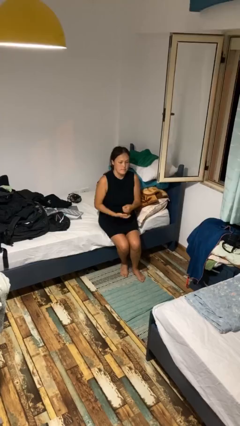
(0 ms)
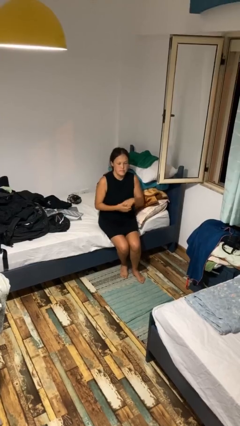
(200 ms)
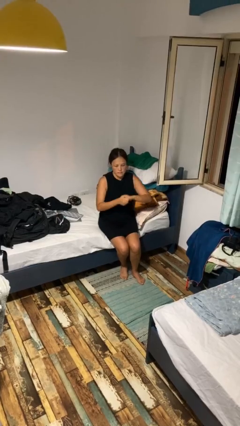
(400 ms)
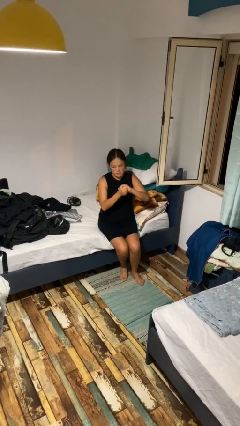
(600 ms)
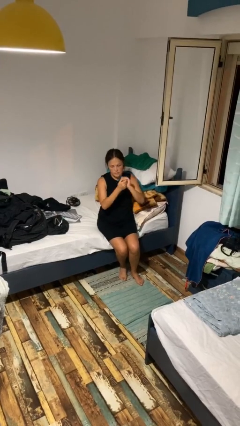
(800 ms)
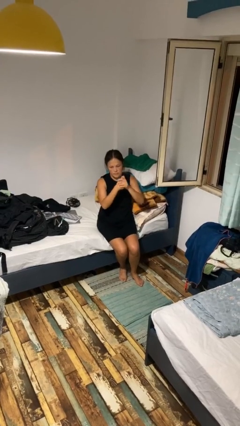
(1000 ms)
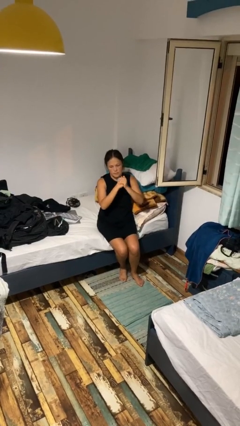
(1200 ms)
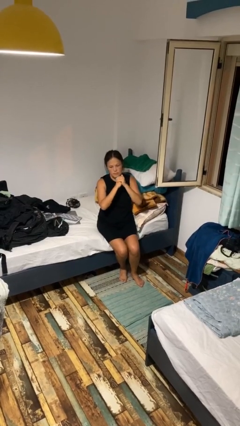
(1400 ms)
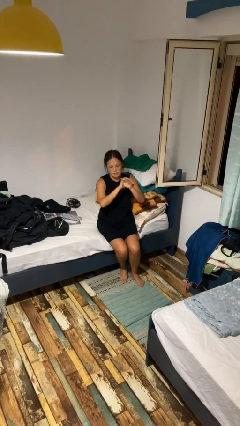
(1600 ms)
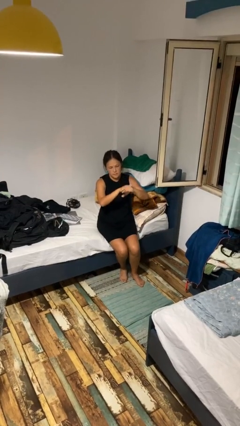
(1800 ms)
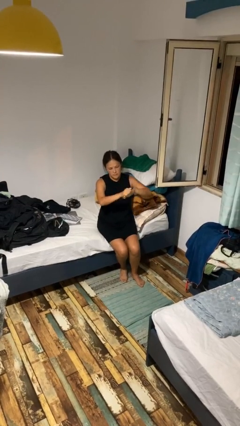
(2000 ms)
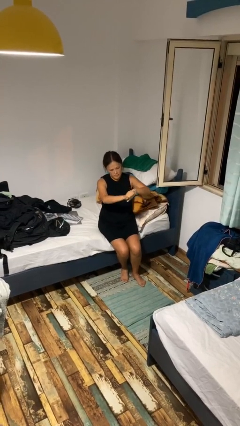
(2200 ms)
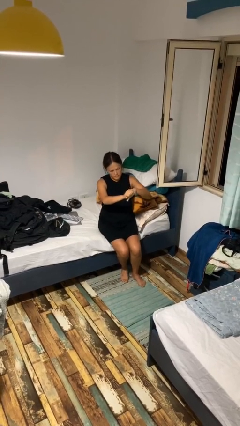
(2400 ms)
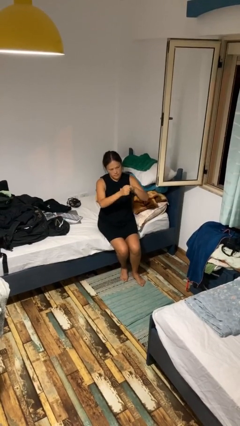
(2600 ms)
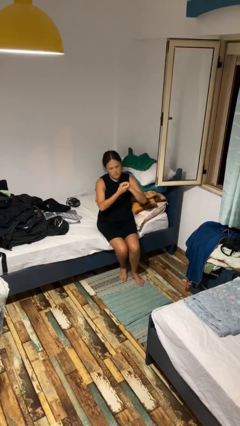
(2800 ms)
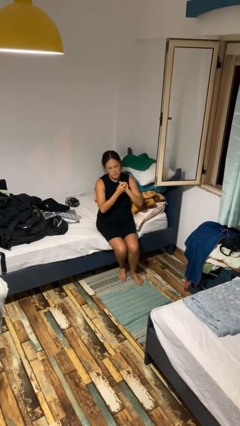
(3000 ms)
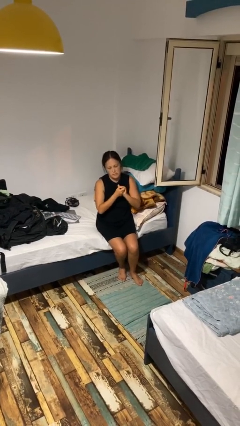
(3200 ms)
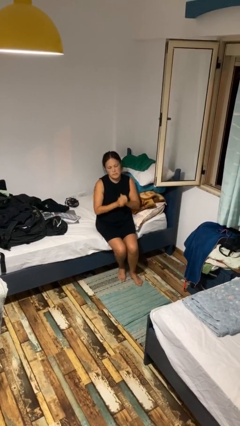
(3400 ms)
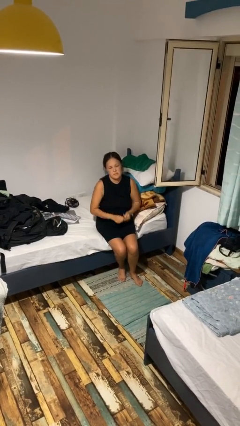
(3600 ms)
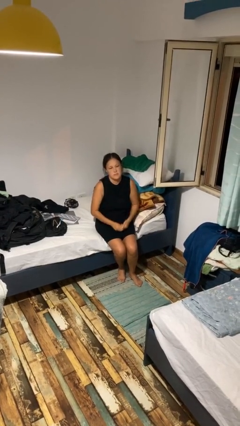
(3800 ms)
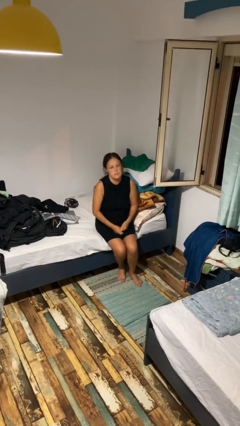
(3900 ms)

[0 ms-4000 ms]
person cracks knuckles

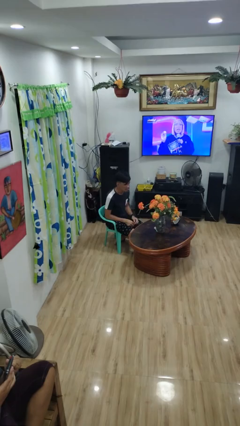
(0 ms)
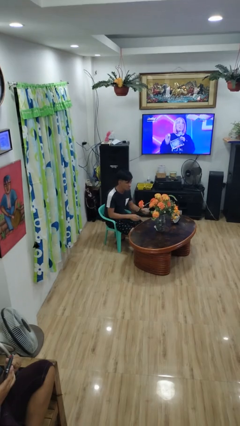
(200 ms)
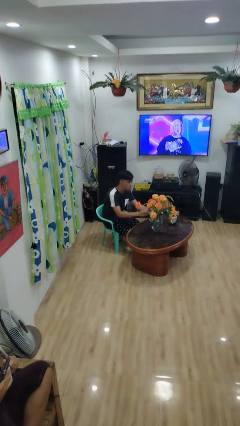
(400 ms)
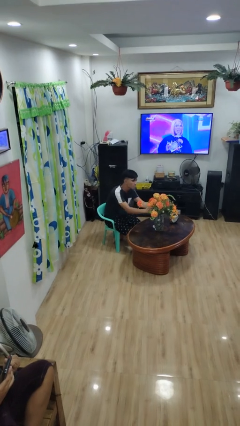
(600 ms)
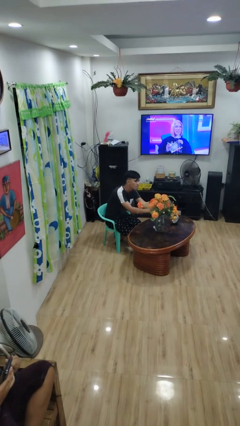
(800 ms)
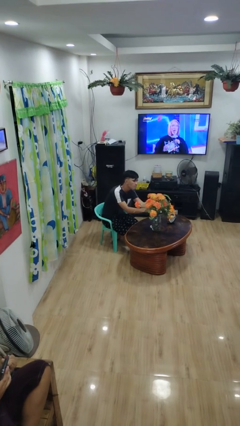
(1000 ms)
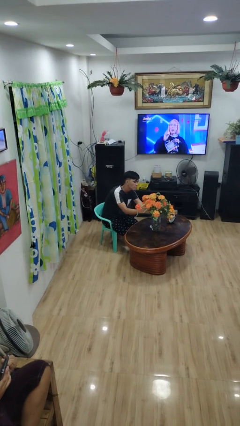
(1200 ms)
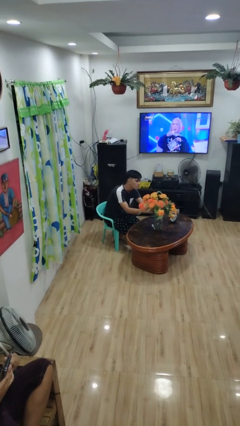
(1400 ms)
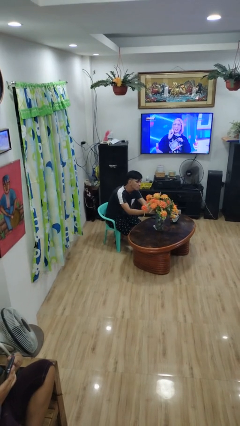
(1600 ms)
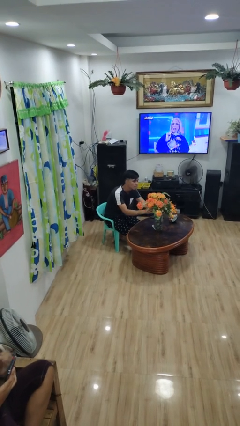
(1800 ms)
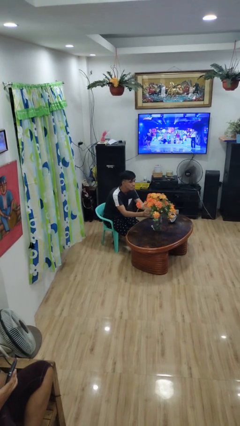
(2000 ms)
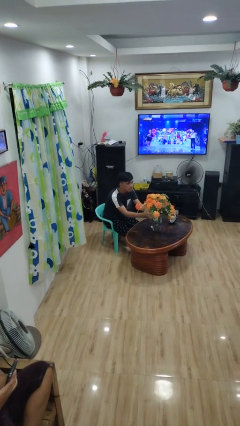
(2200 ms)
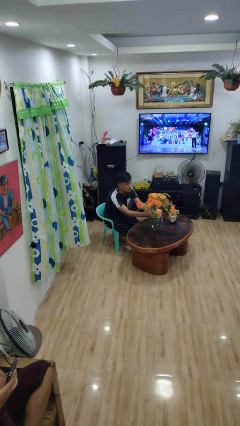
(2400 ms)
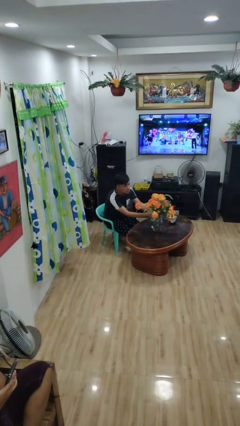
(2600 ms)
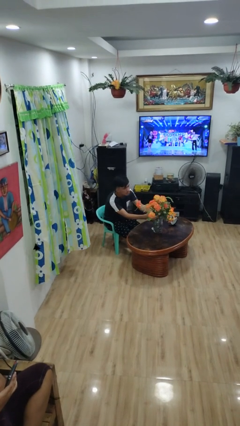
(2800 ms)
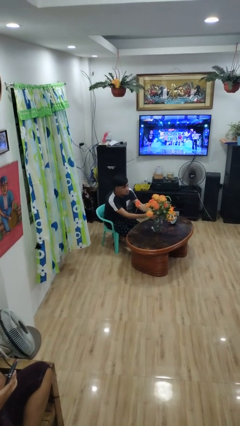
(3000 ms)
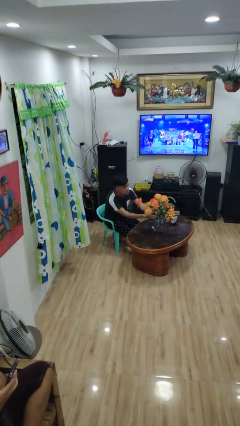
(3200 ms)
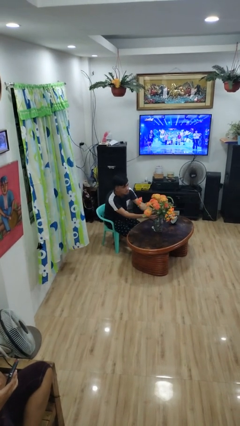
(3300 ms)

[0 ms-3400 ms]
person arranges flowers in vase

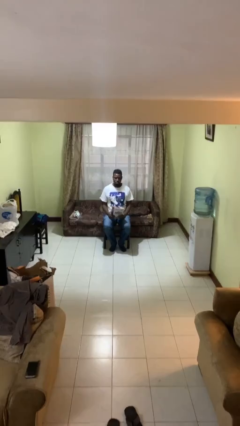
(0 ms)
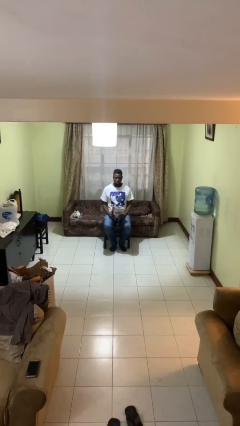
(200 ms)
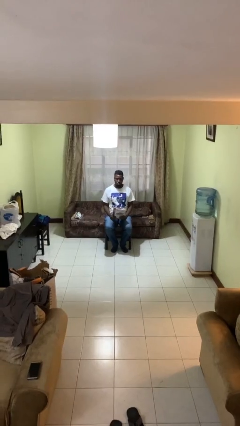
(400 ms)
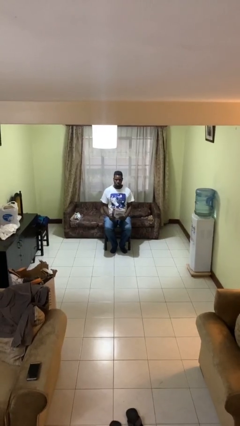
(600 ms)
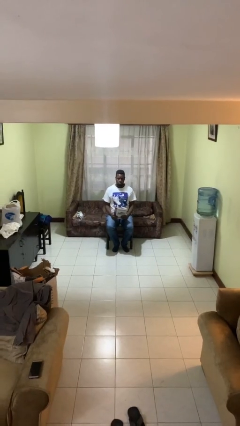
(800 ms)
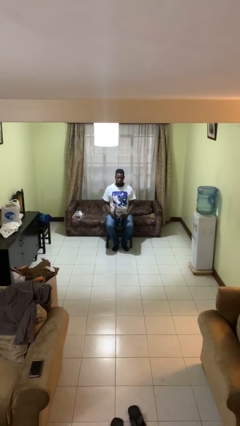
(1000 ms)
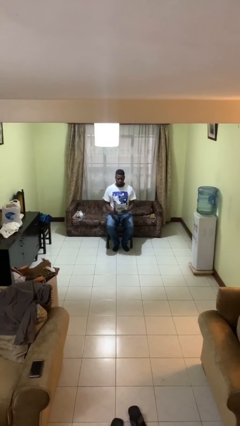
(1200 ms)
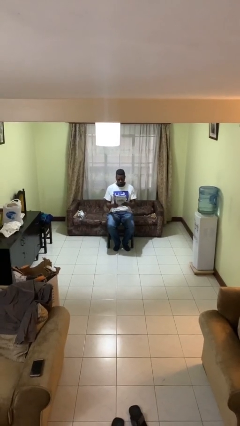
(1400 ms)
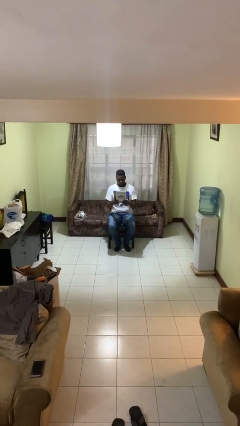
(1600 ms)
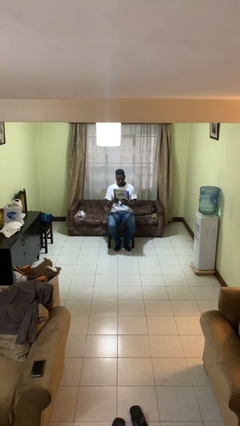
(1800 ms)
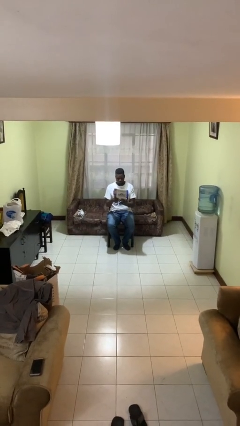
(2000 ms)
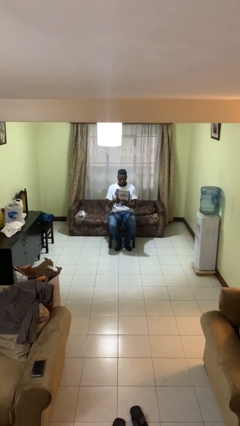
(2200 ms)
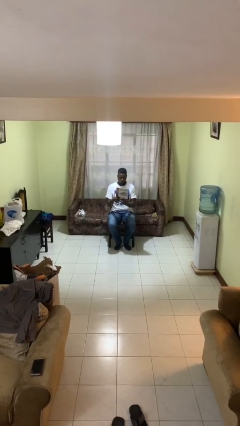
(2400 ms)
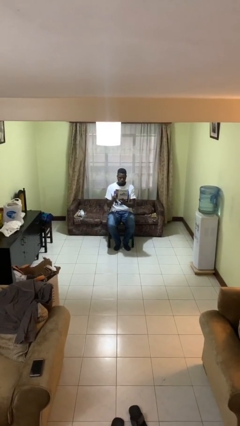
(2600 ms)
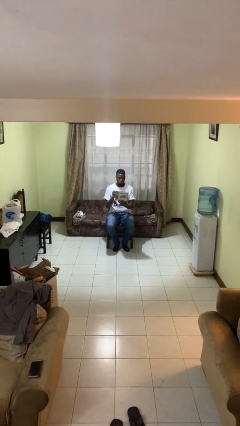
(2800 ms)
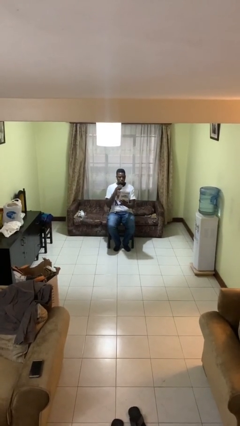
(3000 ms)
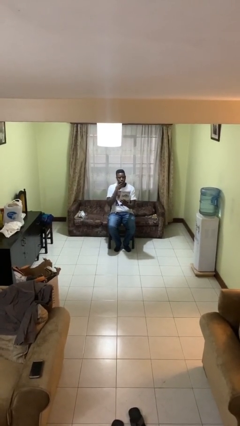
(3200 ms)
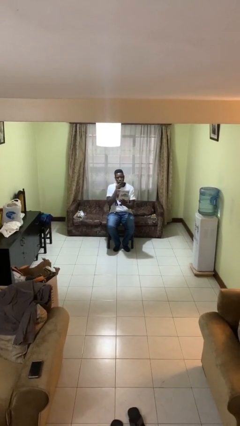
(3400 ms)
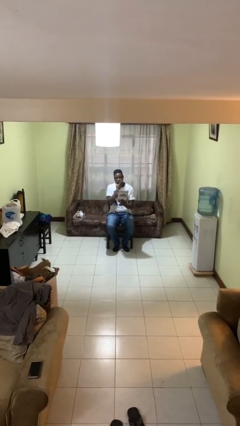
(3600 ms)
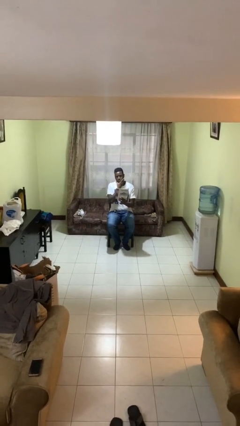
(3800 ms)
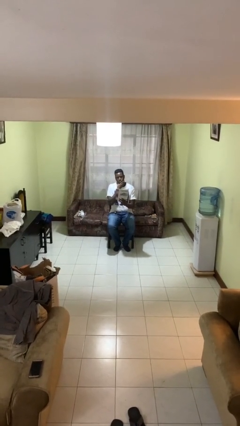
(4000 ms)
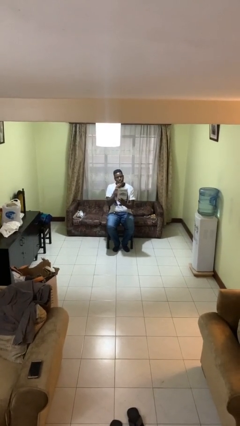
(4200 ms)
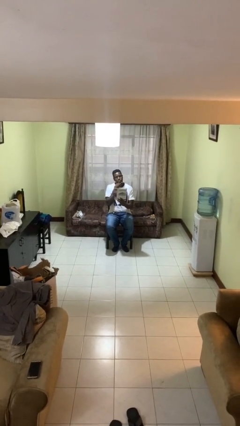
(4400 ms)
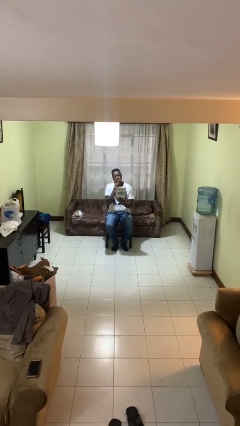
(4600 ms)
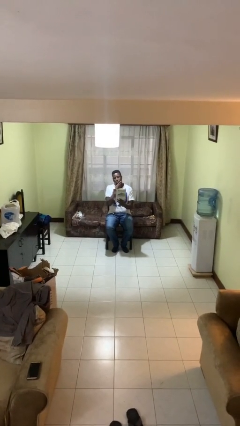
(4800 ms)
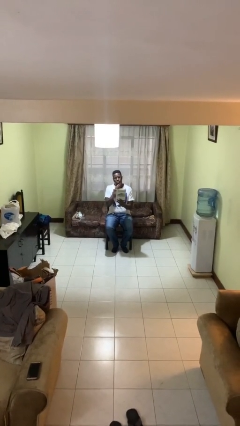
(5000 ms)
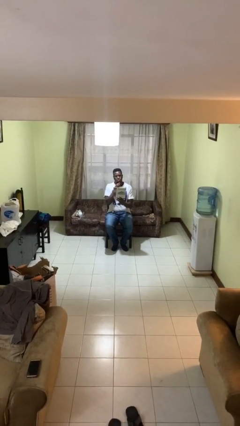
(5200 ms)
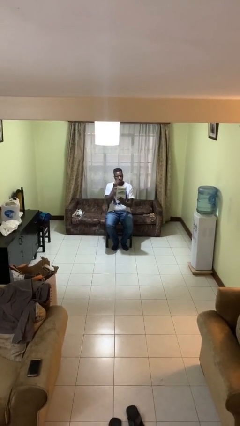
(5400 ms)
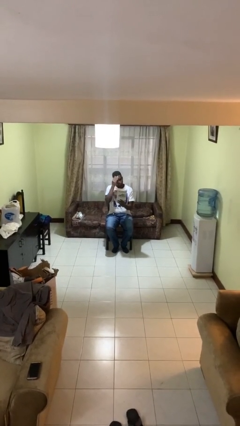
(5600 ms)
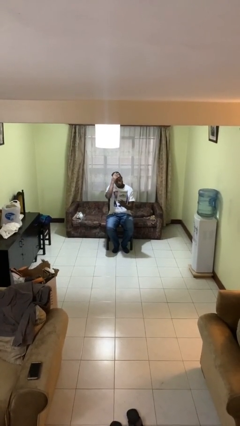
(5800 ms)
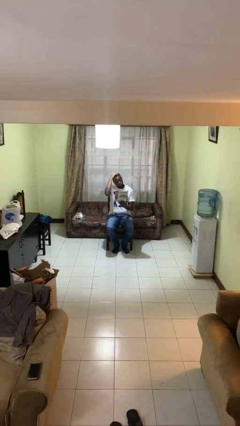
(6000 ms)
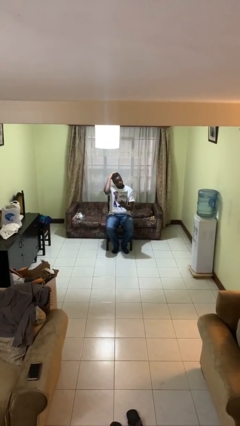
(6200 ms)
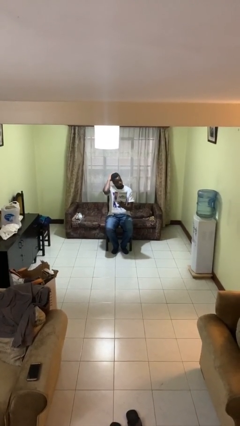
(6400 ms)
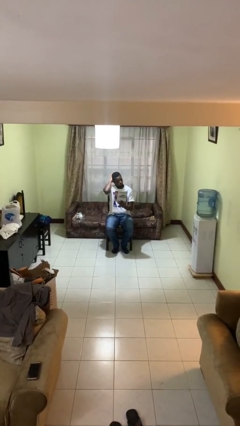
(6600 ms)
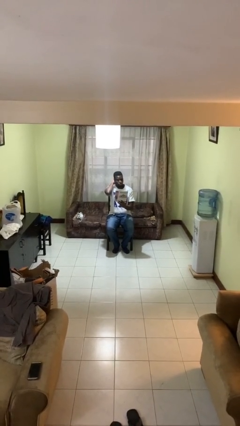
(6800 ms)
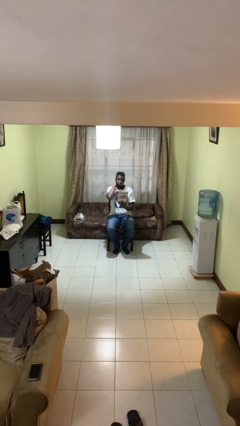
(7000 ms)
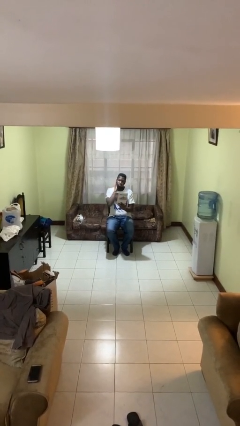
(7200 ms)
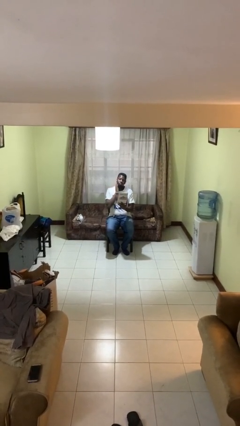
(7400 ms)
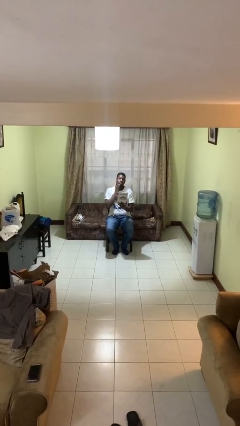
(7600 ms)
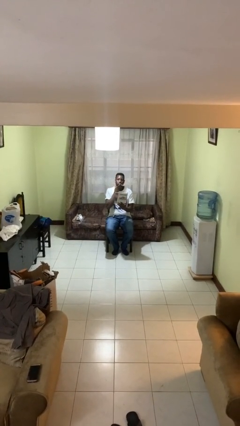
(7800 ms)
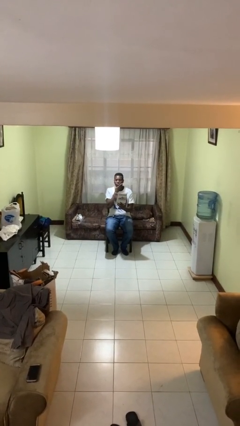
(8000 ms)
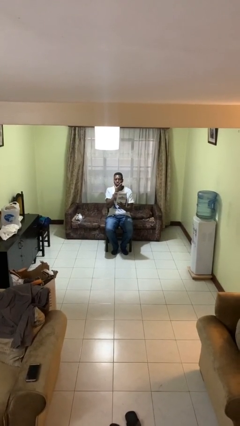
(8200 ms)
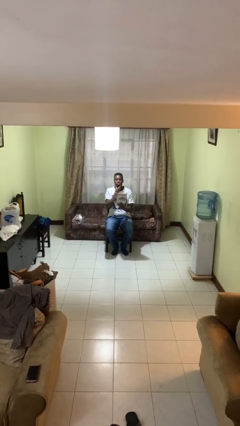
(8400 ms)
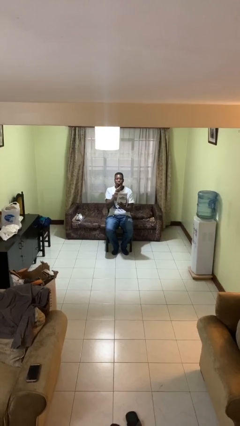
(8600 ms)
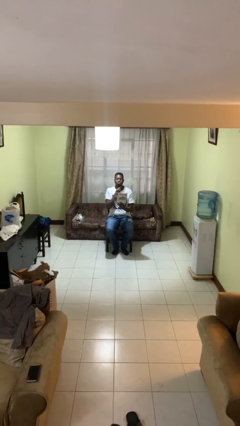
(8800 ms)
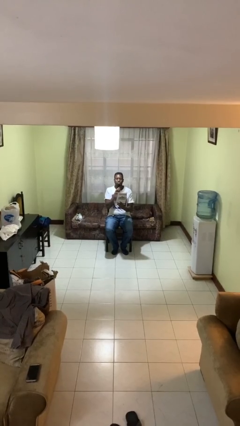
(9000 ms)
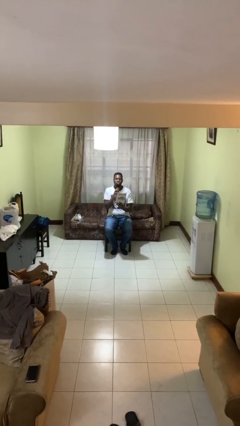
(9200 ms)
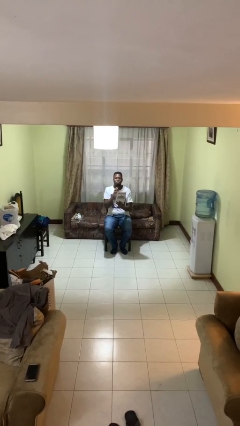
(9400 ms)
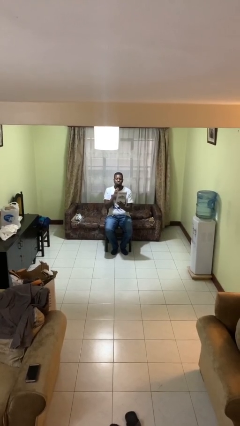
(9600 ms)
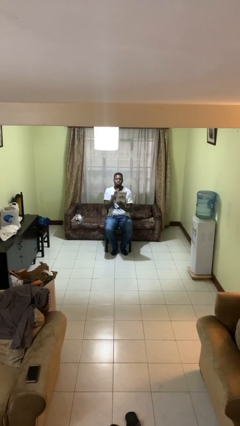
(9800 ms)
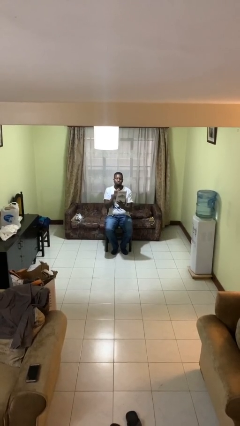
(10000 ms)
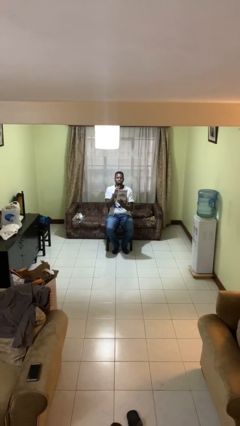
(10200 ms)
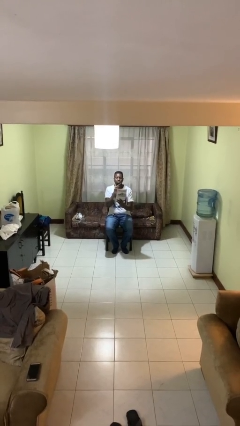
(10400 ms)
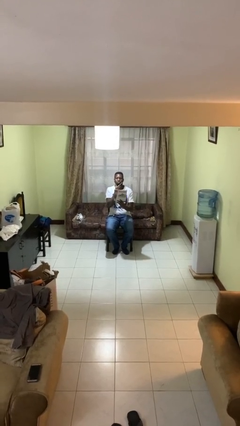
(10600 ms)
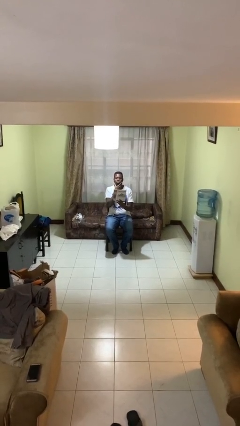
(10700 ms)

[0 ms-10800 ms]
person reads document
